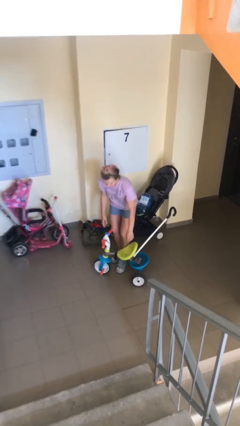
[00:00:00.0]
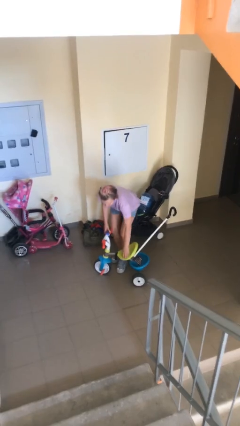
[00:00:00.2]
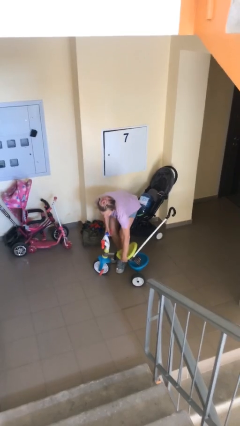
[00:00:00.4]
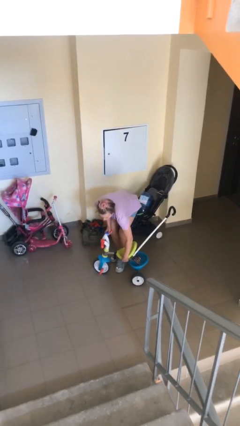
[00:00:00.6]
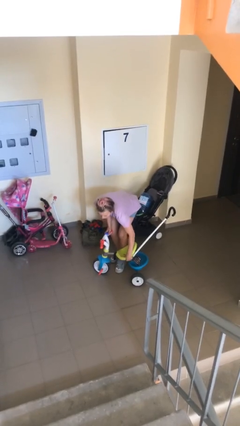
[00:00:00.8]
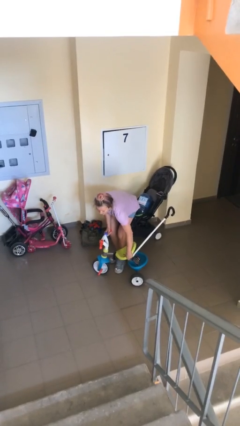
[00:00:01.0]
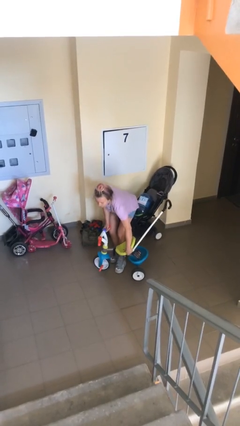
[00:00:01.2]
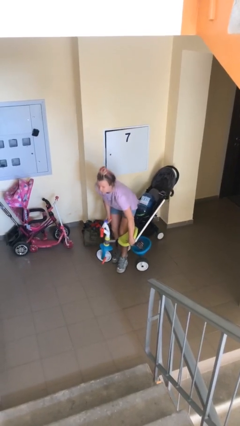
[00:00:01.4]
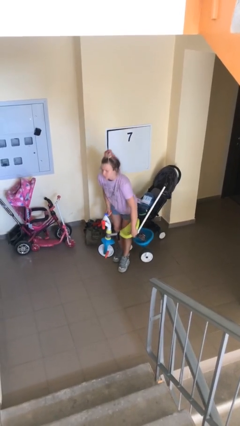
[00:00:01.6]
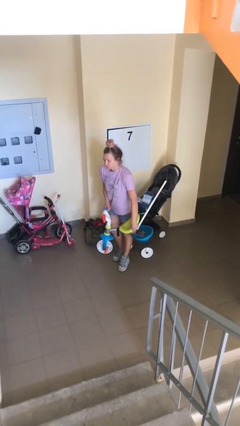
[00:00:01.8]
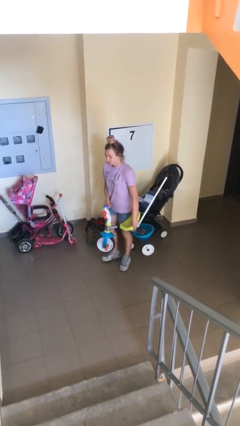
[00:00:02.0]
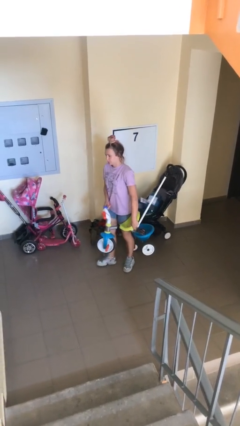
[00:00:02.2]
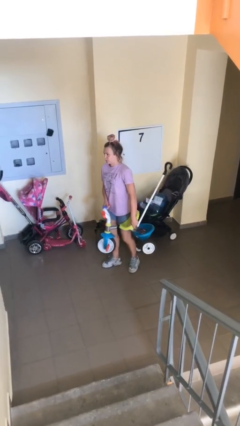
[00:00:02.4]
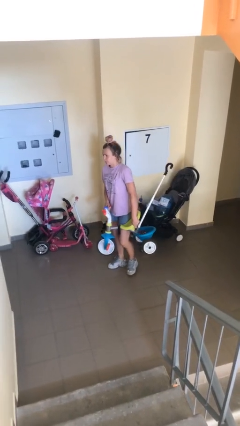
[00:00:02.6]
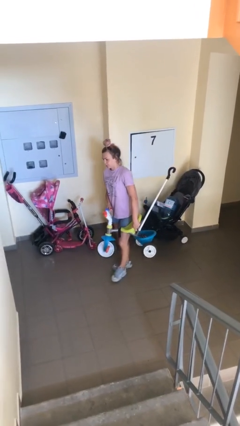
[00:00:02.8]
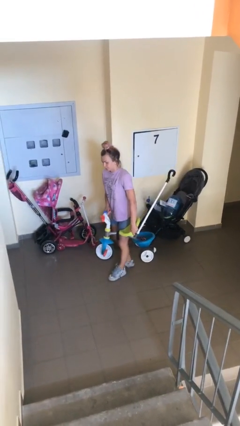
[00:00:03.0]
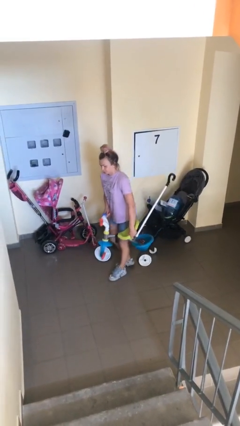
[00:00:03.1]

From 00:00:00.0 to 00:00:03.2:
person carries bicycle

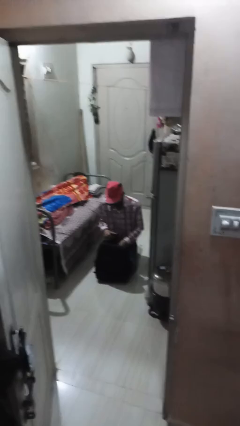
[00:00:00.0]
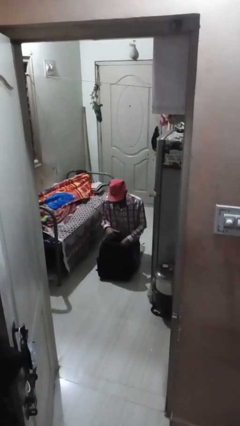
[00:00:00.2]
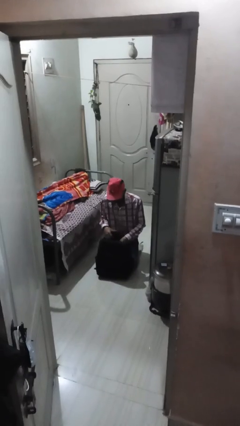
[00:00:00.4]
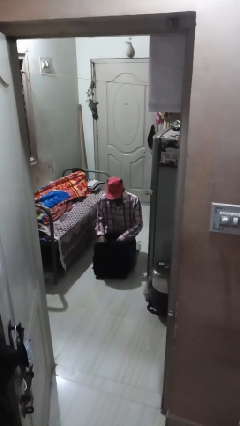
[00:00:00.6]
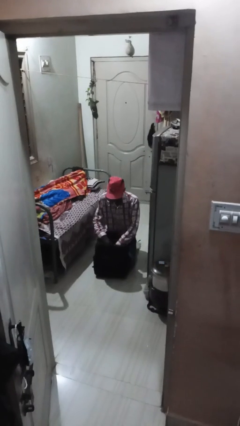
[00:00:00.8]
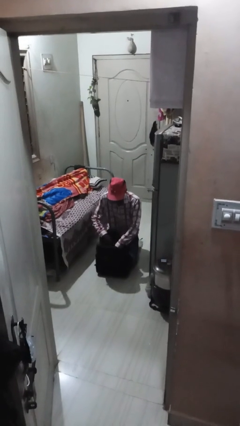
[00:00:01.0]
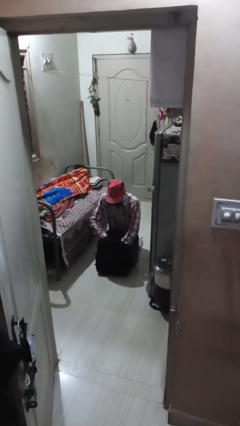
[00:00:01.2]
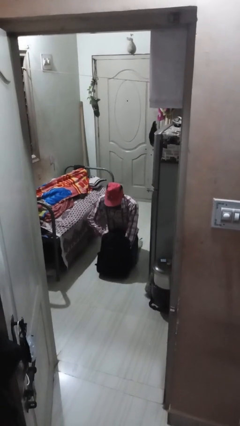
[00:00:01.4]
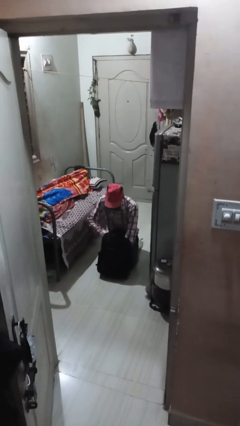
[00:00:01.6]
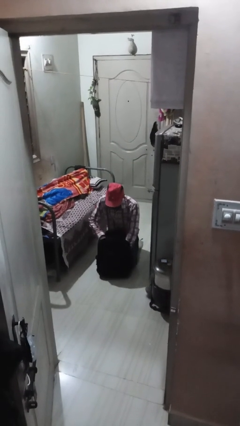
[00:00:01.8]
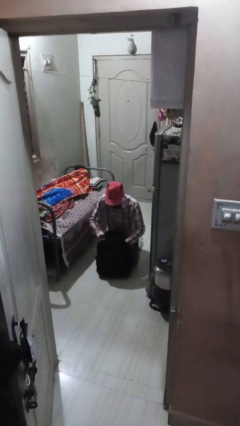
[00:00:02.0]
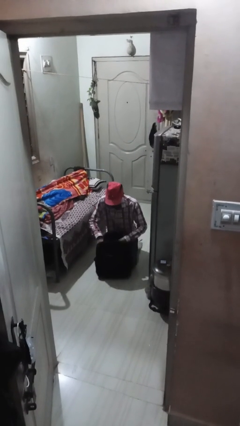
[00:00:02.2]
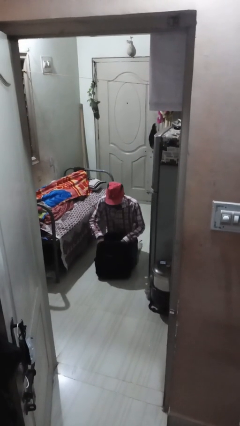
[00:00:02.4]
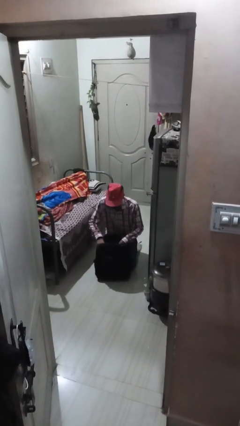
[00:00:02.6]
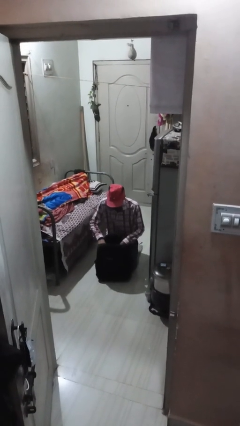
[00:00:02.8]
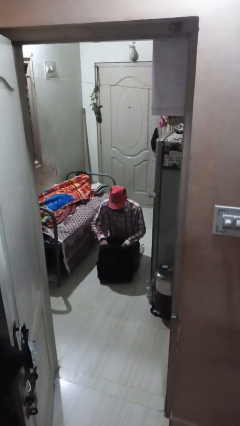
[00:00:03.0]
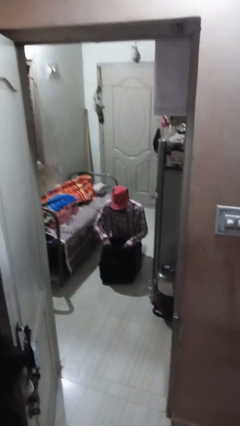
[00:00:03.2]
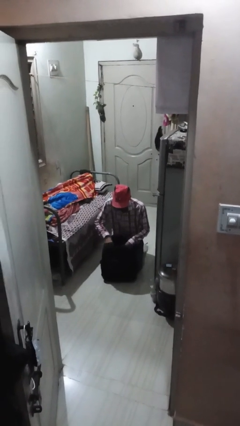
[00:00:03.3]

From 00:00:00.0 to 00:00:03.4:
person searches in backpack

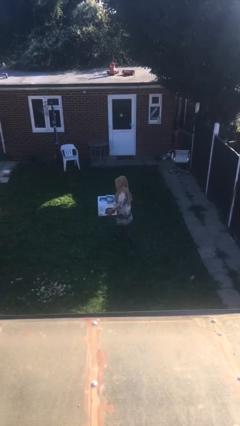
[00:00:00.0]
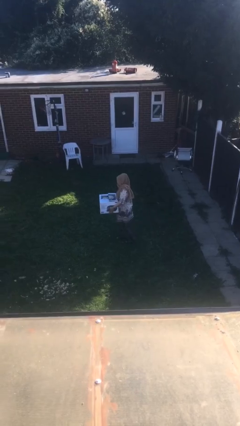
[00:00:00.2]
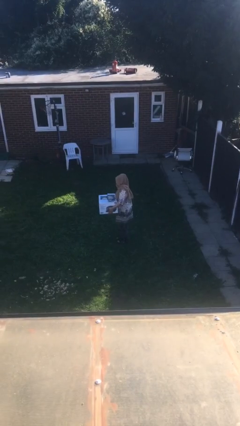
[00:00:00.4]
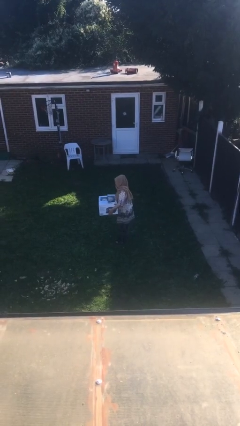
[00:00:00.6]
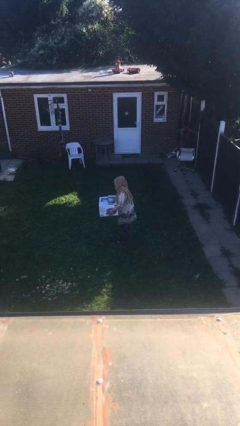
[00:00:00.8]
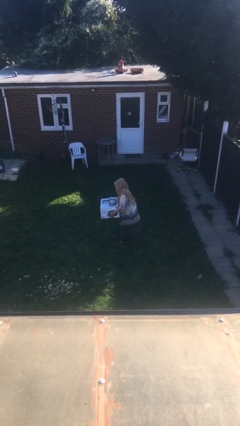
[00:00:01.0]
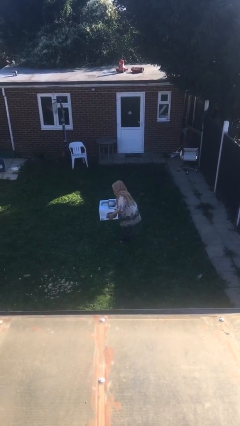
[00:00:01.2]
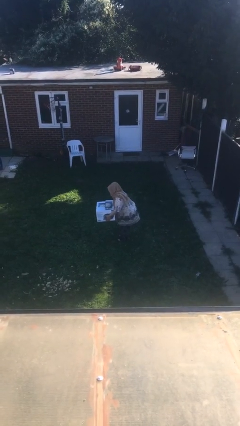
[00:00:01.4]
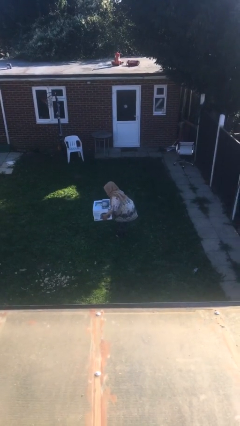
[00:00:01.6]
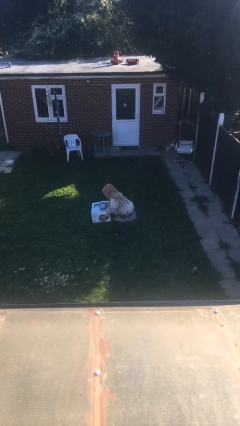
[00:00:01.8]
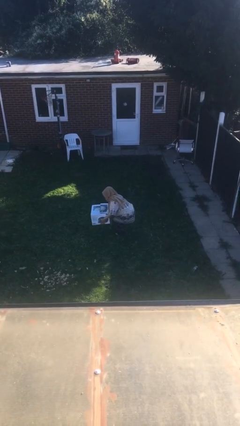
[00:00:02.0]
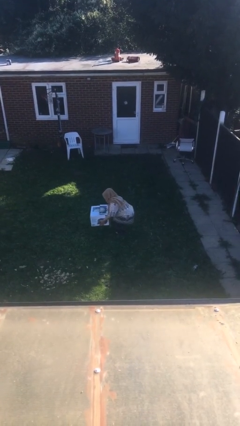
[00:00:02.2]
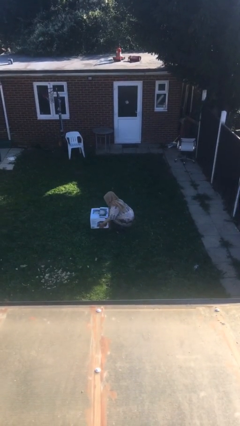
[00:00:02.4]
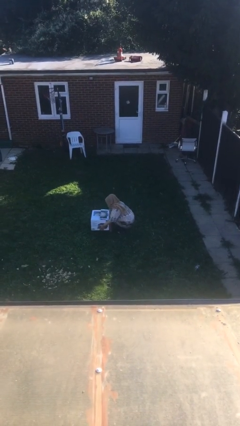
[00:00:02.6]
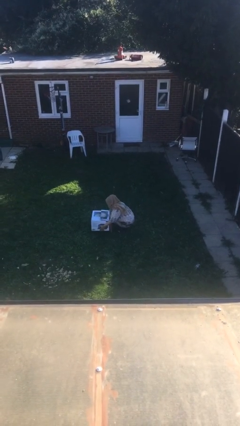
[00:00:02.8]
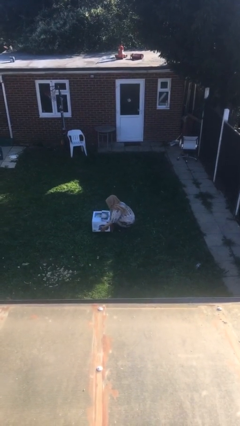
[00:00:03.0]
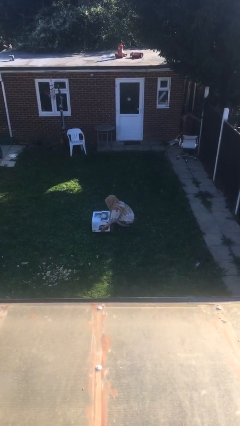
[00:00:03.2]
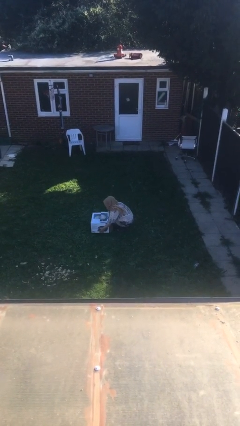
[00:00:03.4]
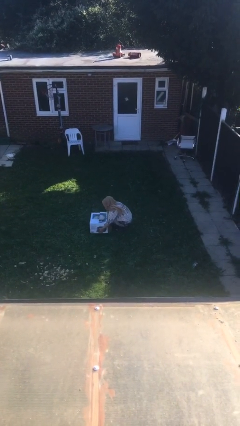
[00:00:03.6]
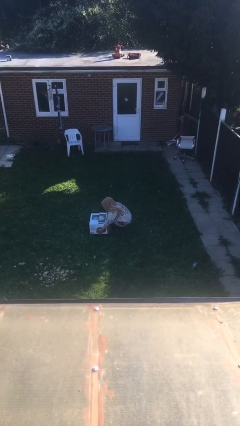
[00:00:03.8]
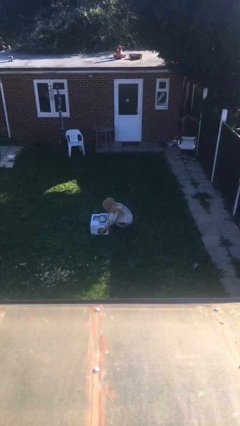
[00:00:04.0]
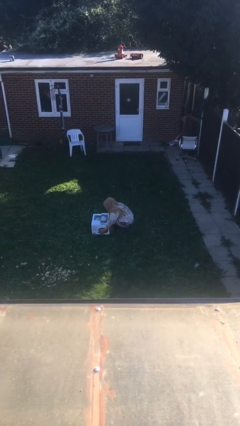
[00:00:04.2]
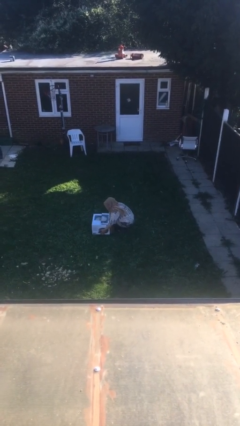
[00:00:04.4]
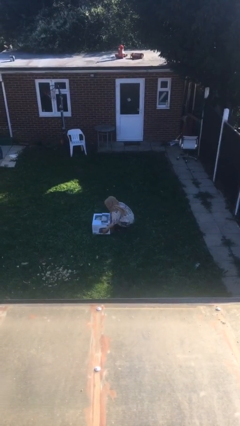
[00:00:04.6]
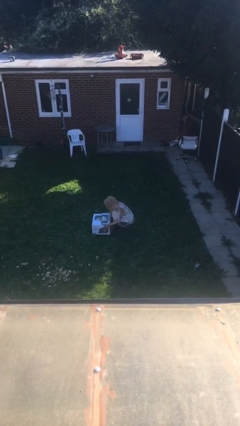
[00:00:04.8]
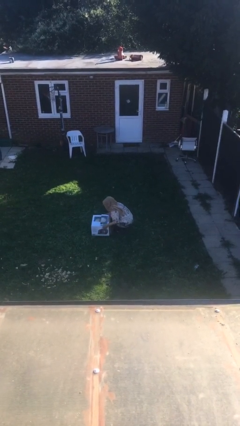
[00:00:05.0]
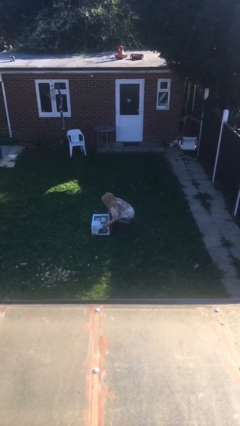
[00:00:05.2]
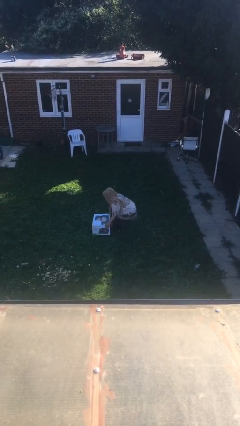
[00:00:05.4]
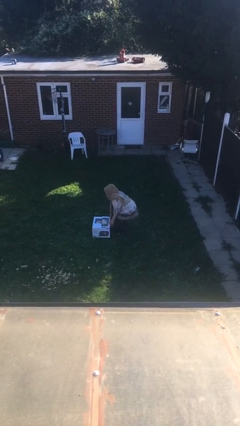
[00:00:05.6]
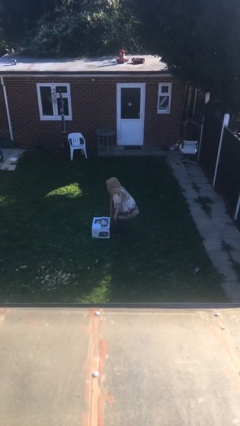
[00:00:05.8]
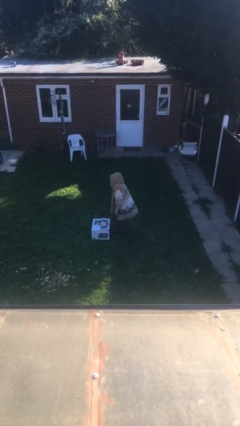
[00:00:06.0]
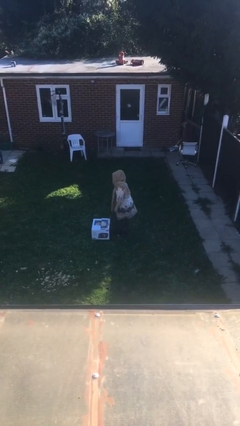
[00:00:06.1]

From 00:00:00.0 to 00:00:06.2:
person puts down object on floor

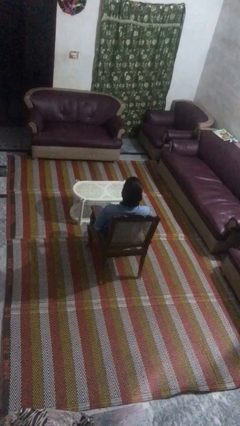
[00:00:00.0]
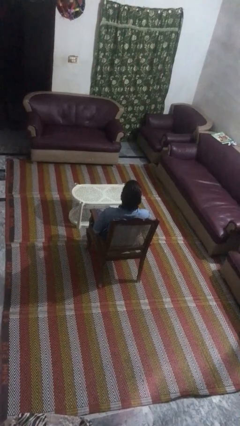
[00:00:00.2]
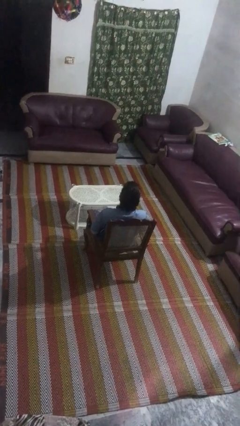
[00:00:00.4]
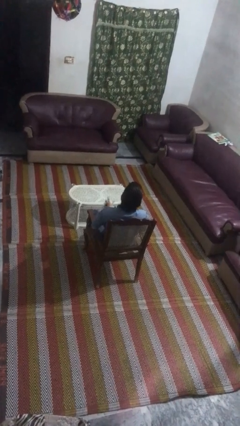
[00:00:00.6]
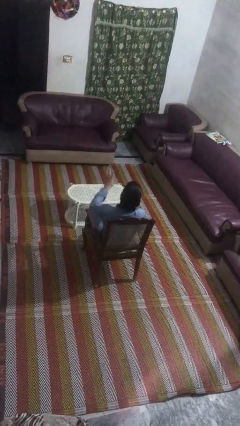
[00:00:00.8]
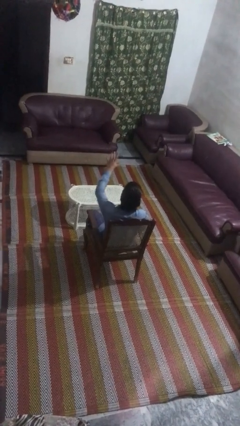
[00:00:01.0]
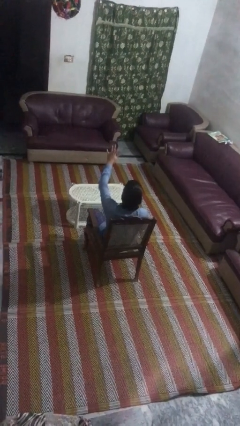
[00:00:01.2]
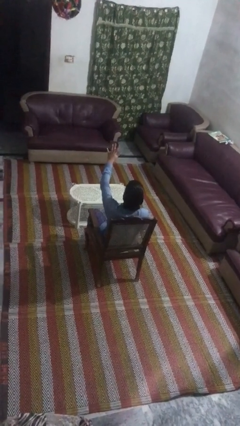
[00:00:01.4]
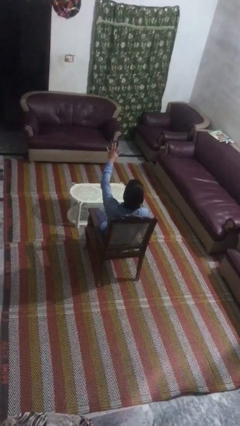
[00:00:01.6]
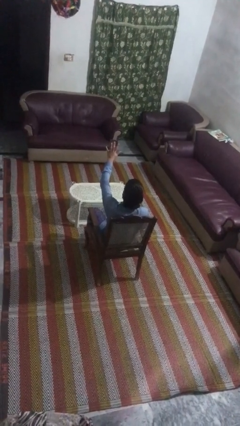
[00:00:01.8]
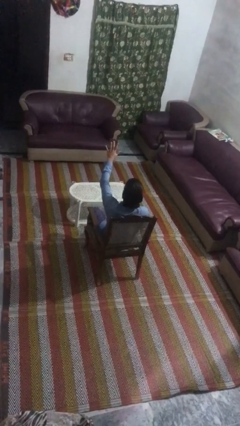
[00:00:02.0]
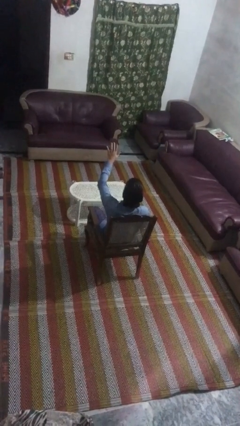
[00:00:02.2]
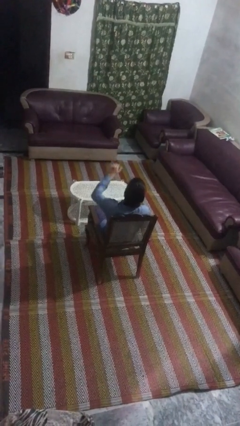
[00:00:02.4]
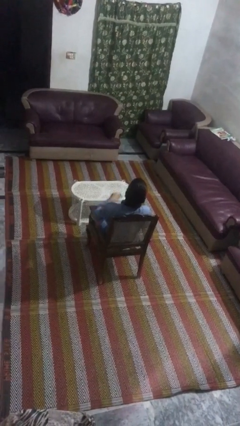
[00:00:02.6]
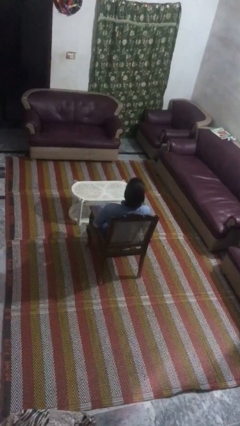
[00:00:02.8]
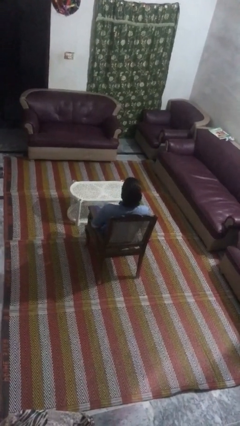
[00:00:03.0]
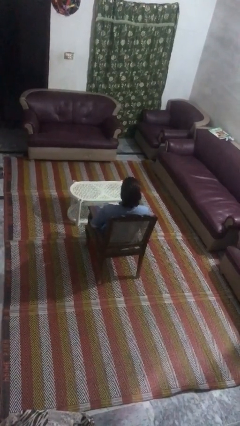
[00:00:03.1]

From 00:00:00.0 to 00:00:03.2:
person gestures number five

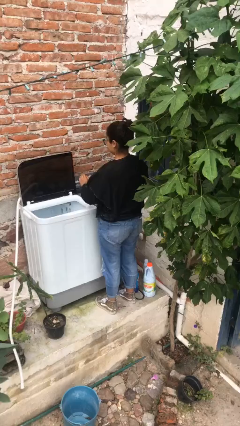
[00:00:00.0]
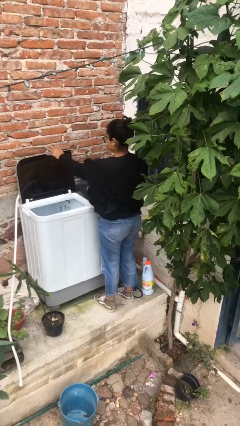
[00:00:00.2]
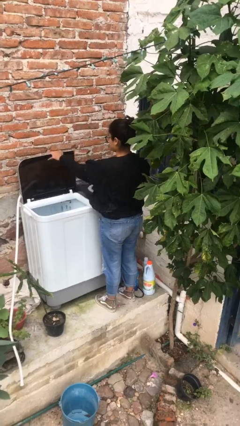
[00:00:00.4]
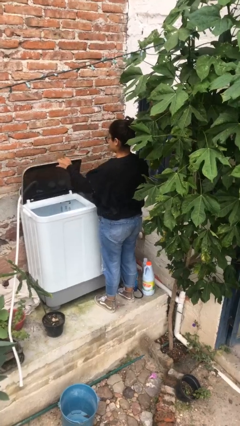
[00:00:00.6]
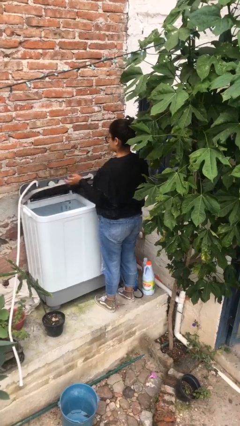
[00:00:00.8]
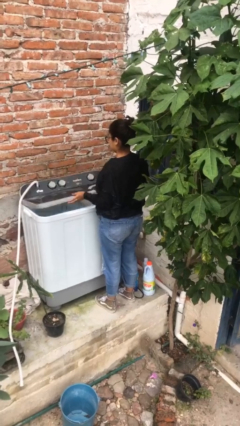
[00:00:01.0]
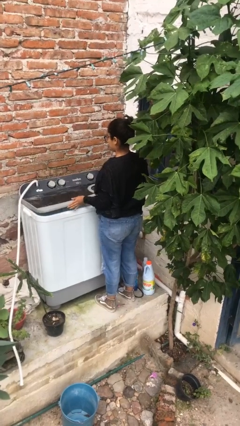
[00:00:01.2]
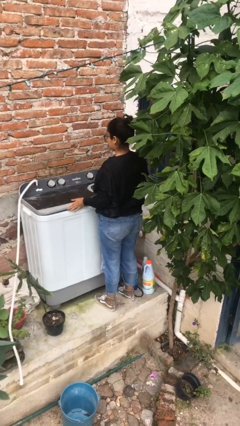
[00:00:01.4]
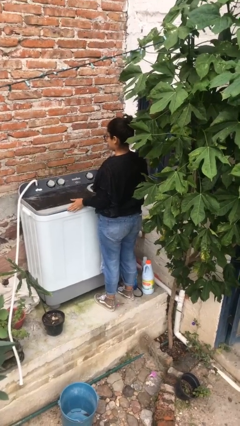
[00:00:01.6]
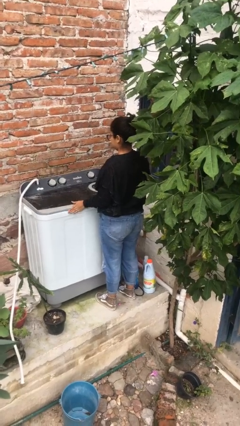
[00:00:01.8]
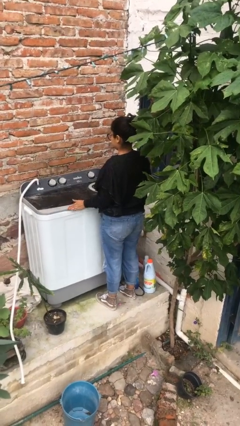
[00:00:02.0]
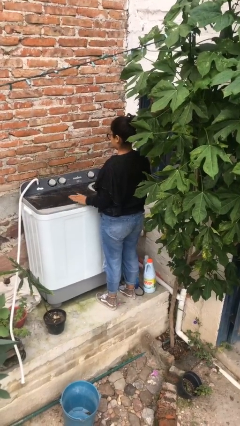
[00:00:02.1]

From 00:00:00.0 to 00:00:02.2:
person closes clothes washer
